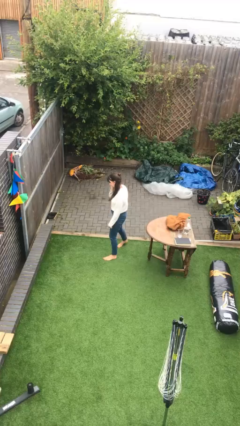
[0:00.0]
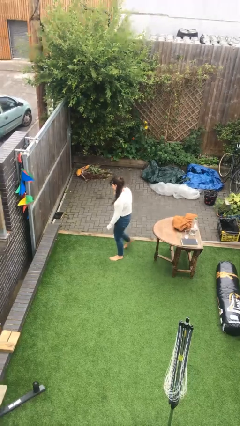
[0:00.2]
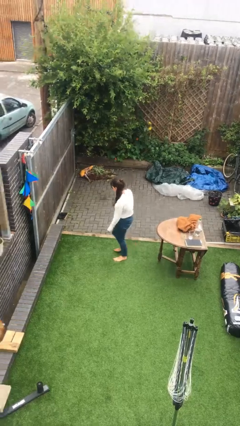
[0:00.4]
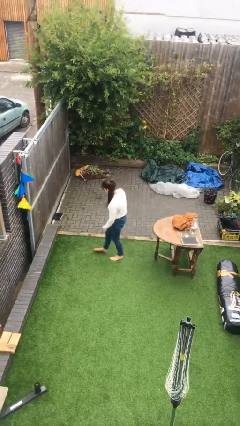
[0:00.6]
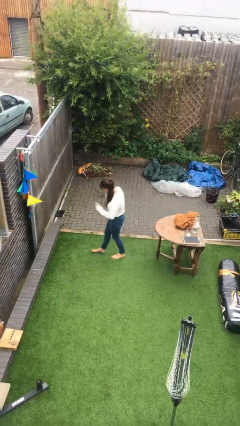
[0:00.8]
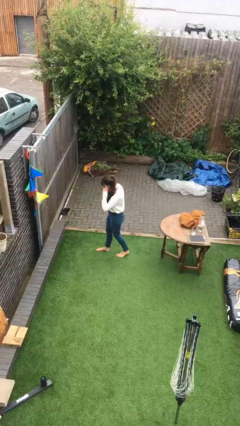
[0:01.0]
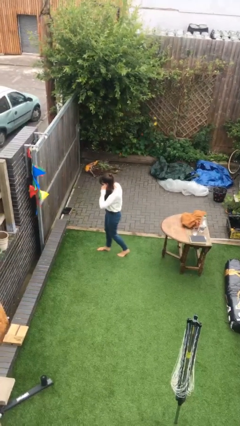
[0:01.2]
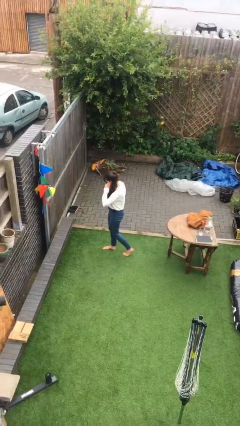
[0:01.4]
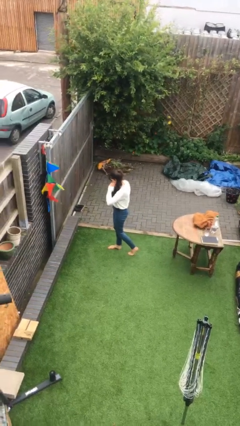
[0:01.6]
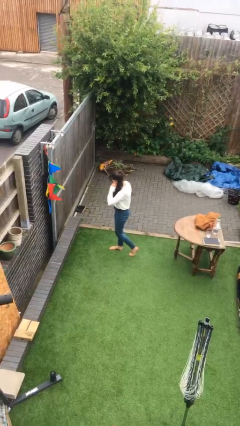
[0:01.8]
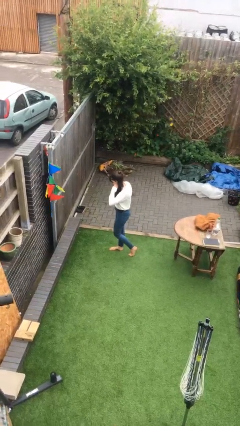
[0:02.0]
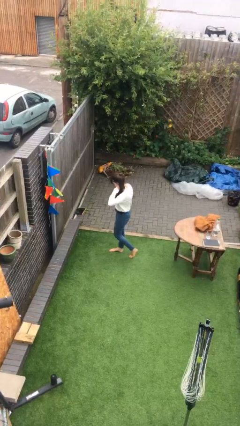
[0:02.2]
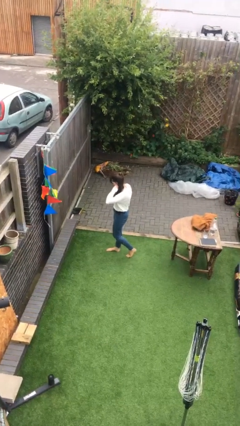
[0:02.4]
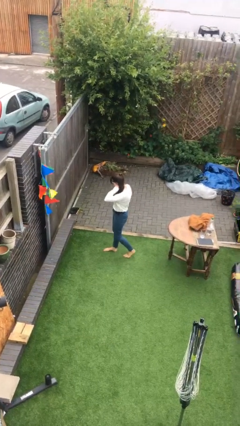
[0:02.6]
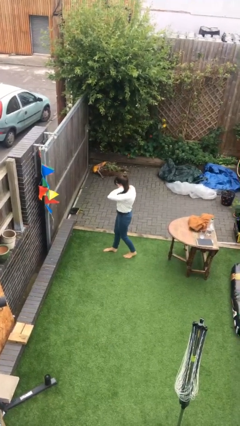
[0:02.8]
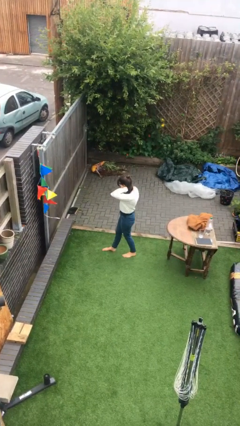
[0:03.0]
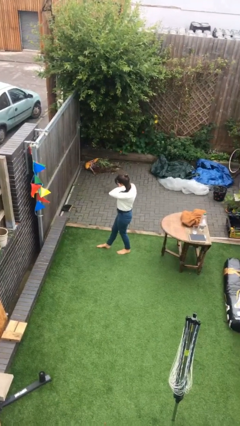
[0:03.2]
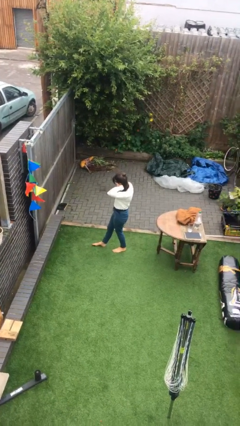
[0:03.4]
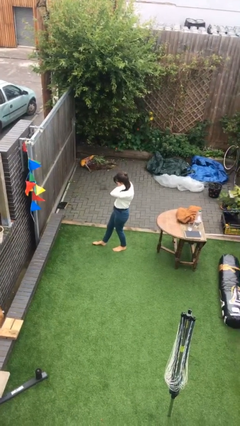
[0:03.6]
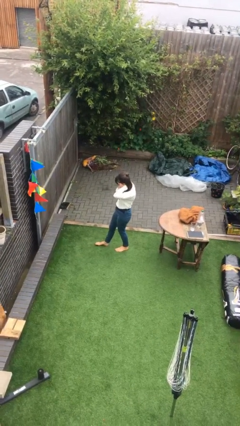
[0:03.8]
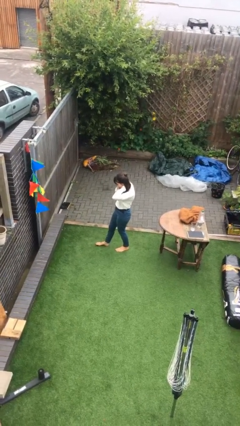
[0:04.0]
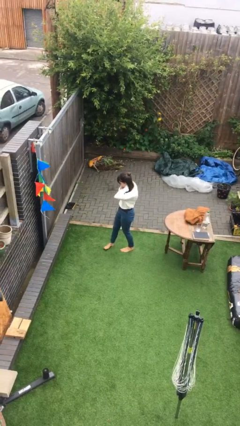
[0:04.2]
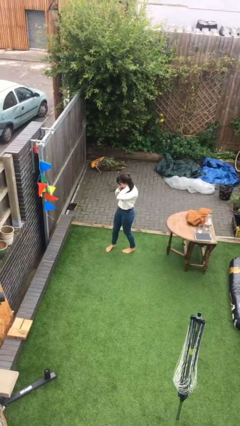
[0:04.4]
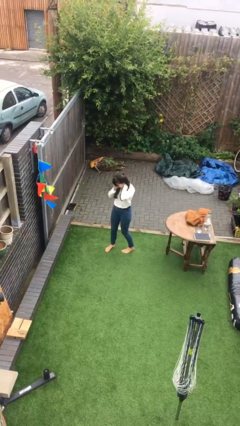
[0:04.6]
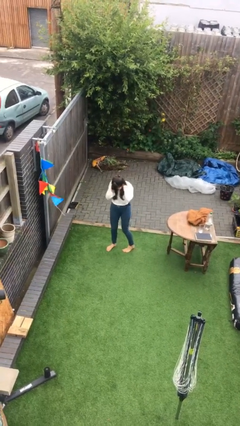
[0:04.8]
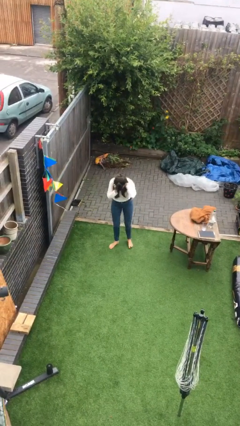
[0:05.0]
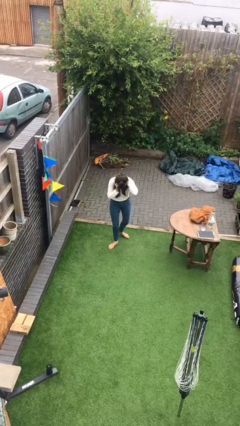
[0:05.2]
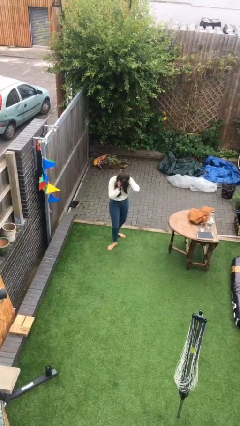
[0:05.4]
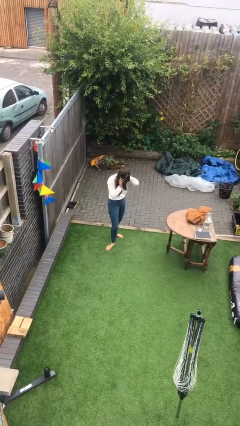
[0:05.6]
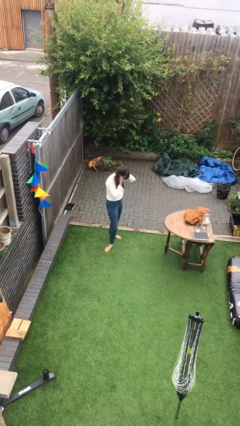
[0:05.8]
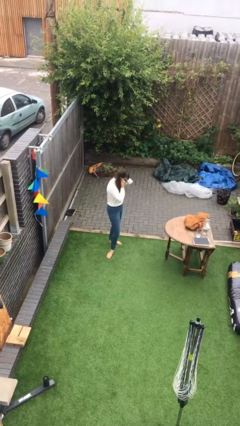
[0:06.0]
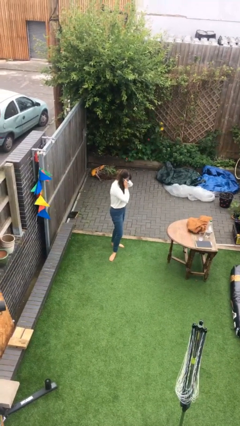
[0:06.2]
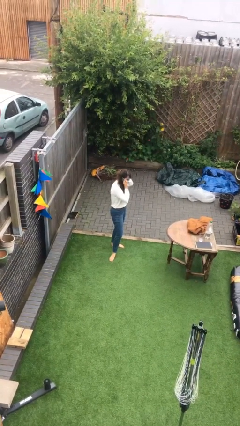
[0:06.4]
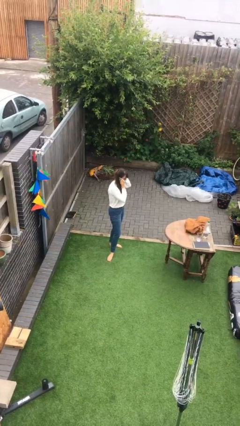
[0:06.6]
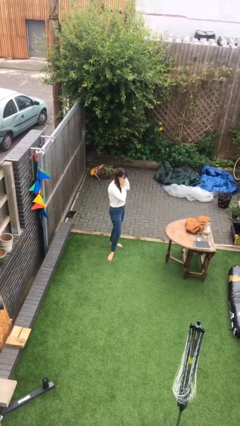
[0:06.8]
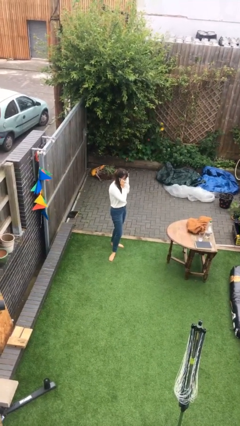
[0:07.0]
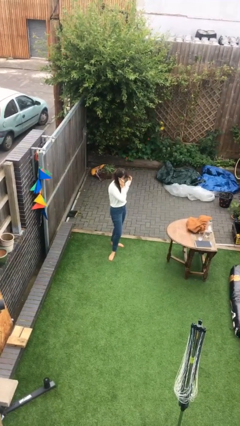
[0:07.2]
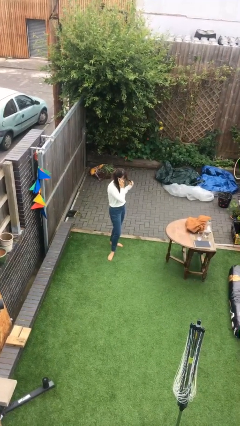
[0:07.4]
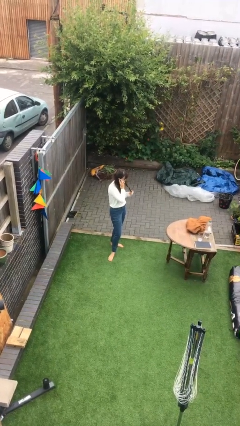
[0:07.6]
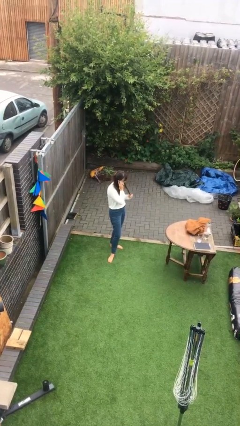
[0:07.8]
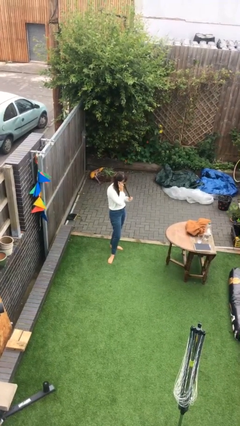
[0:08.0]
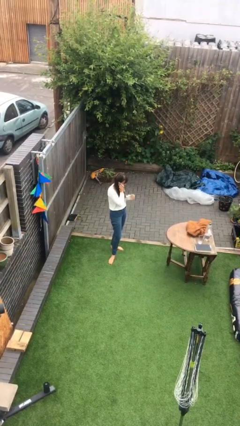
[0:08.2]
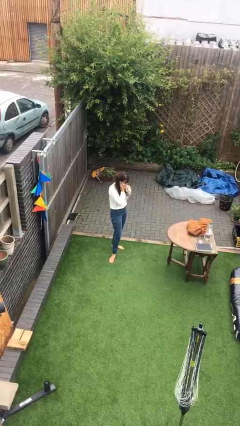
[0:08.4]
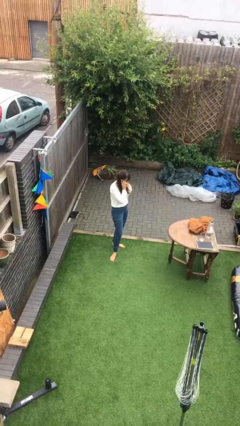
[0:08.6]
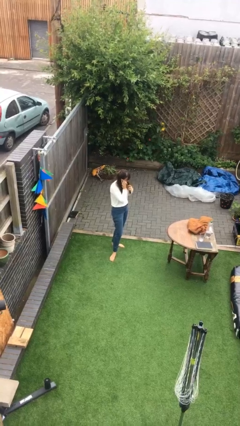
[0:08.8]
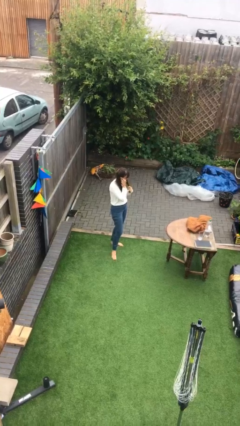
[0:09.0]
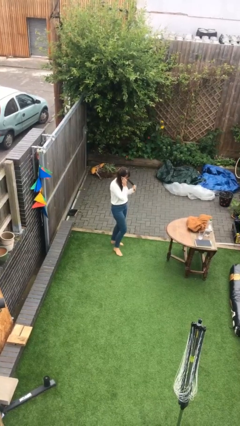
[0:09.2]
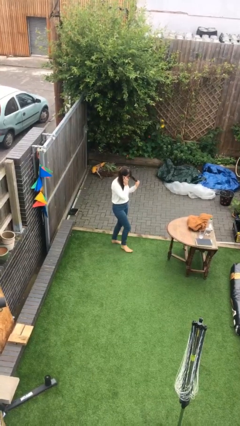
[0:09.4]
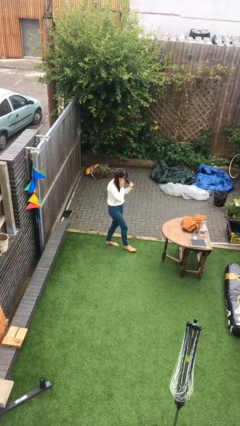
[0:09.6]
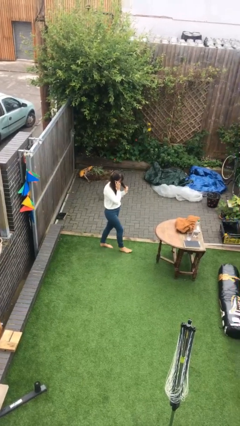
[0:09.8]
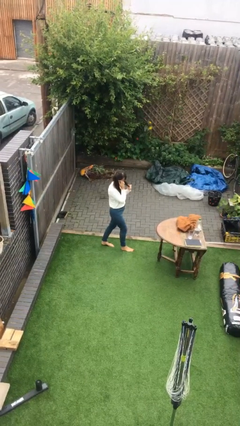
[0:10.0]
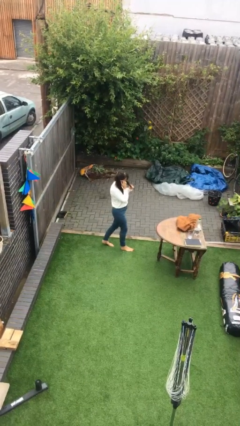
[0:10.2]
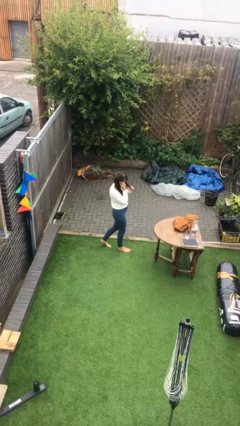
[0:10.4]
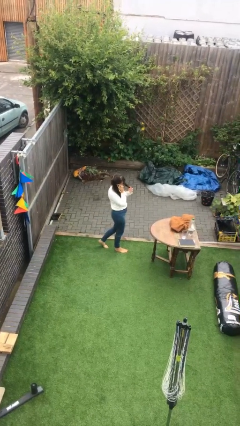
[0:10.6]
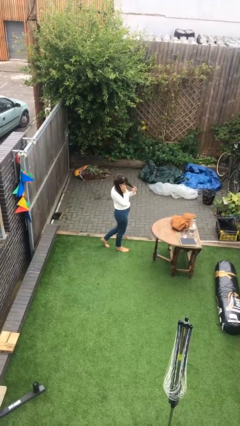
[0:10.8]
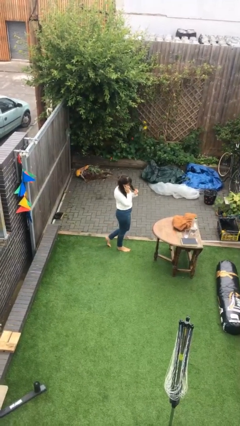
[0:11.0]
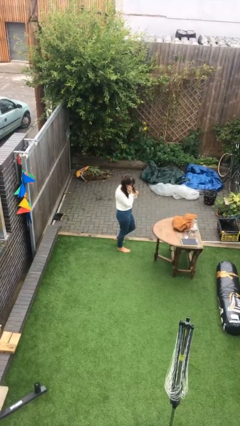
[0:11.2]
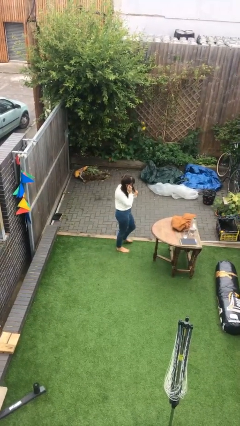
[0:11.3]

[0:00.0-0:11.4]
person talks on phone

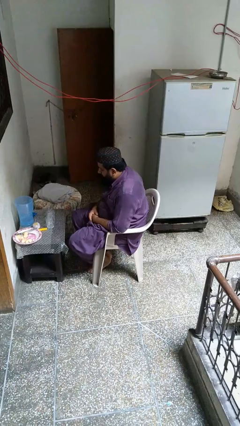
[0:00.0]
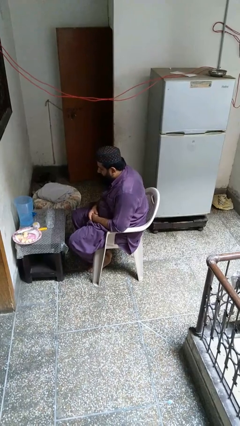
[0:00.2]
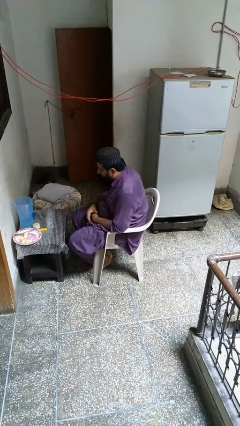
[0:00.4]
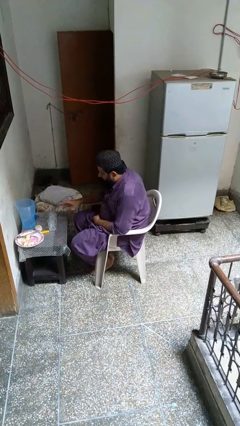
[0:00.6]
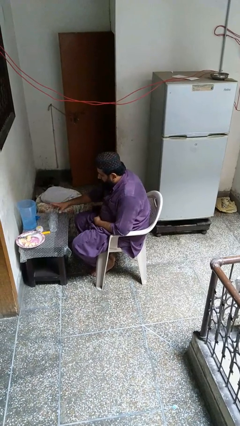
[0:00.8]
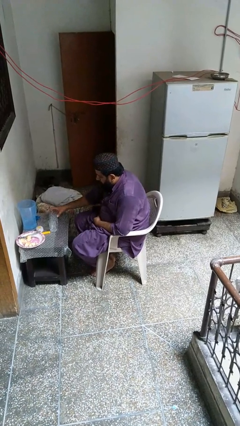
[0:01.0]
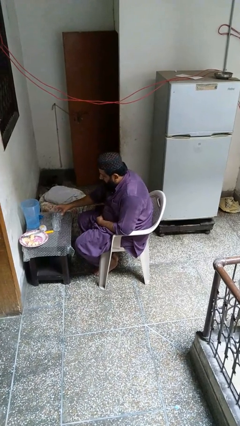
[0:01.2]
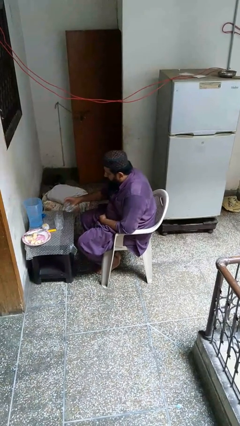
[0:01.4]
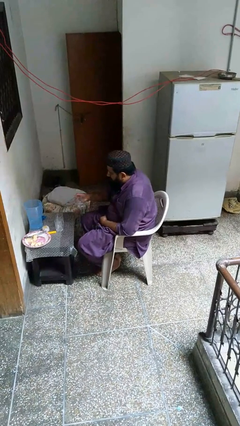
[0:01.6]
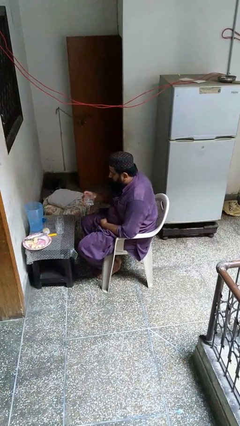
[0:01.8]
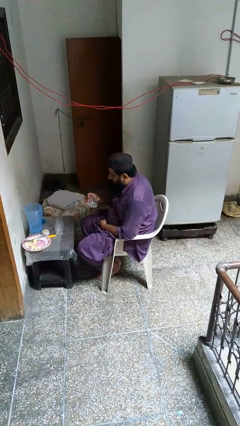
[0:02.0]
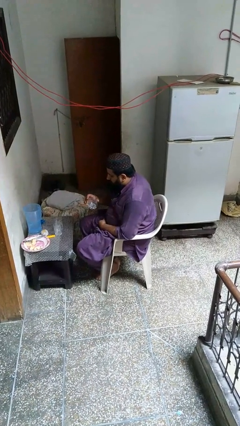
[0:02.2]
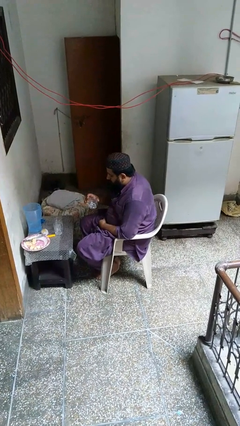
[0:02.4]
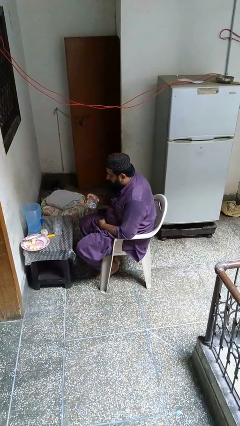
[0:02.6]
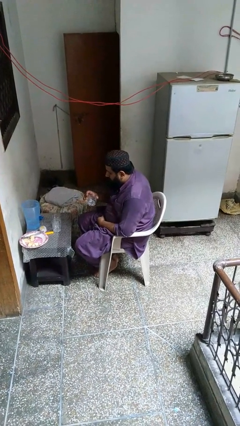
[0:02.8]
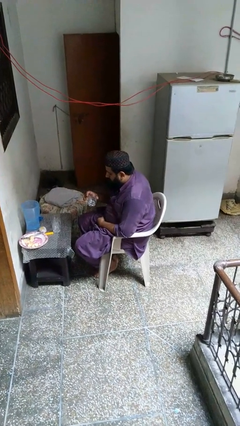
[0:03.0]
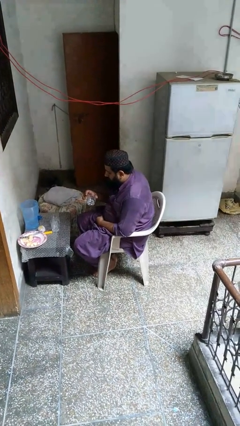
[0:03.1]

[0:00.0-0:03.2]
person picks up object from table

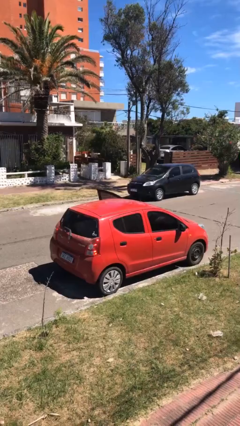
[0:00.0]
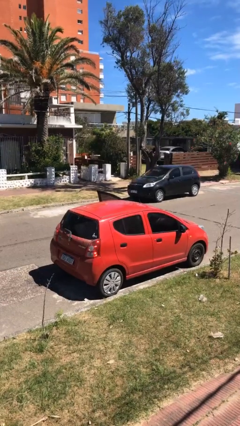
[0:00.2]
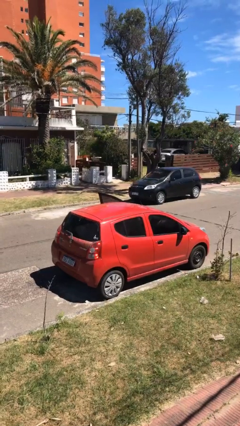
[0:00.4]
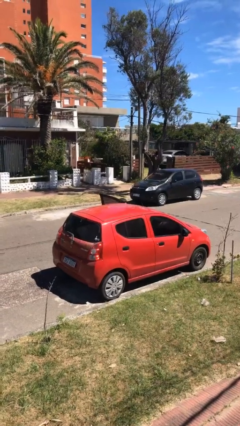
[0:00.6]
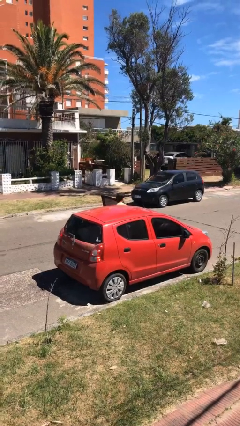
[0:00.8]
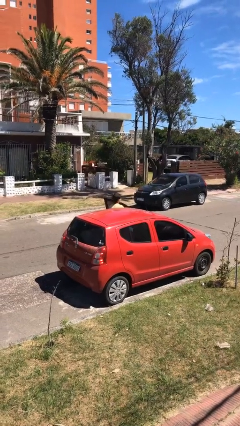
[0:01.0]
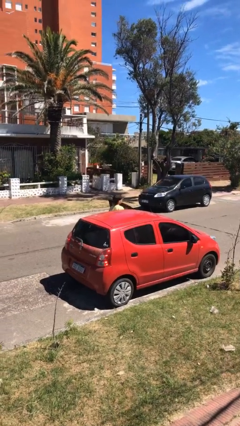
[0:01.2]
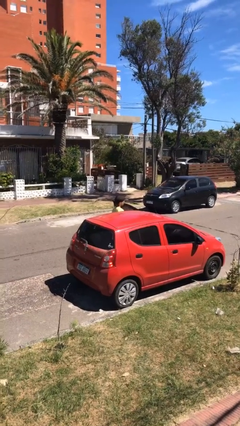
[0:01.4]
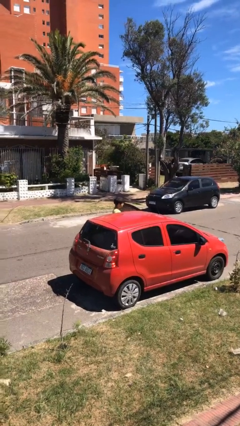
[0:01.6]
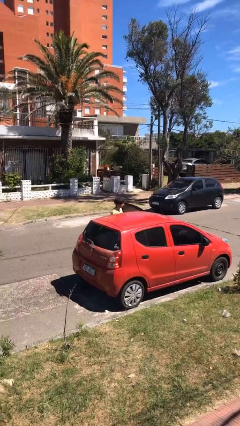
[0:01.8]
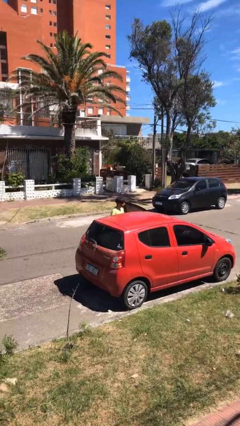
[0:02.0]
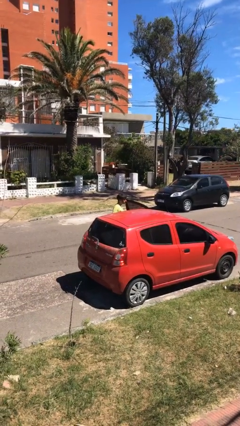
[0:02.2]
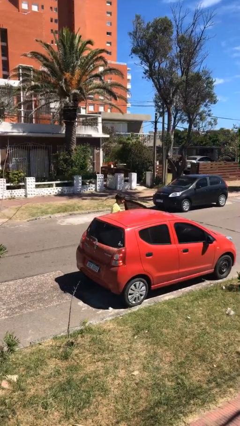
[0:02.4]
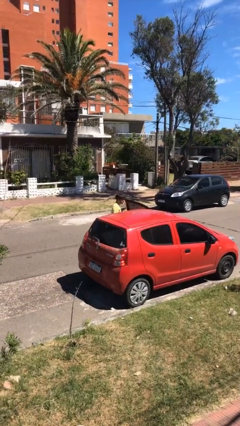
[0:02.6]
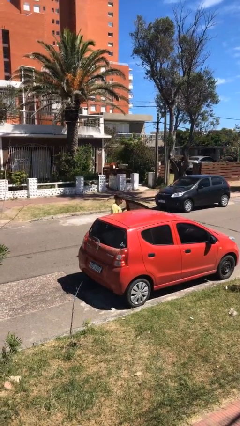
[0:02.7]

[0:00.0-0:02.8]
person exits car

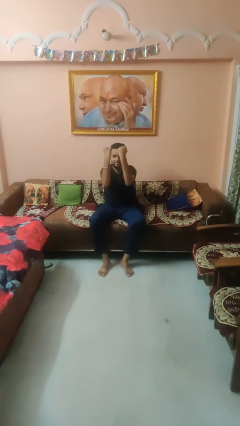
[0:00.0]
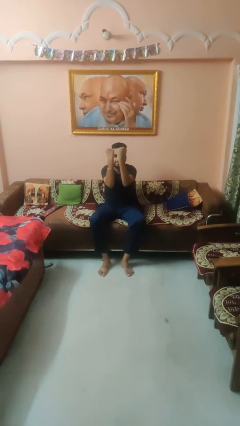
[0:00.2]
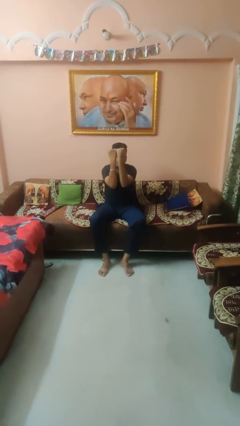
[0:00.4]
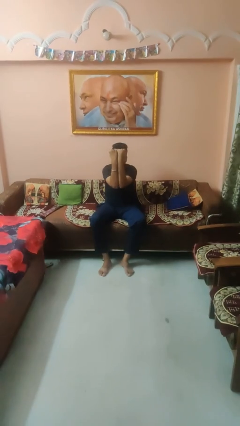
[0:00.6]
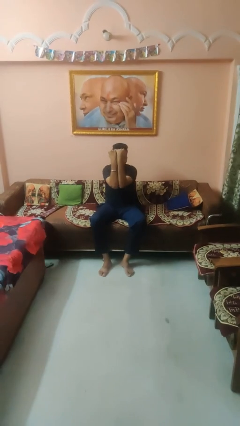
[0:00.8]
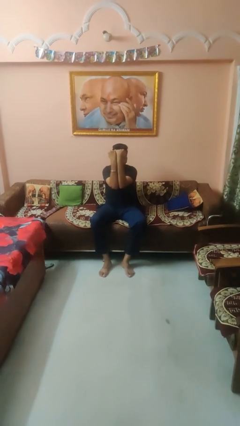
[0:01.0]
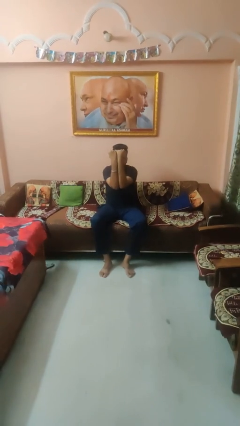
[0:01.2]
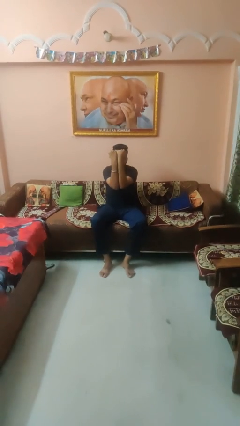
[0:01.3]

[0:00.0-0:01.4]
person gestures zoom out
